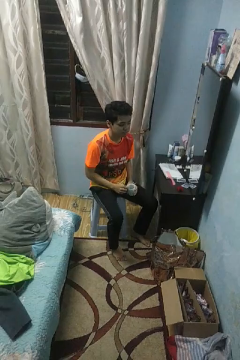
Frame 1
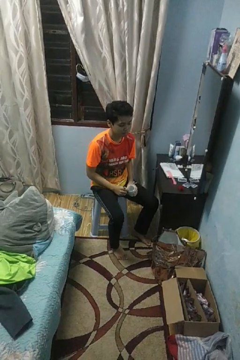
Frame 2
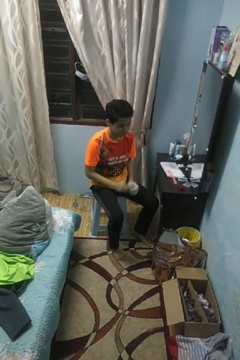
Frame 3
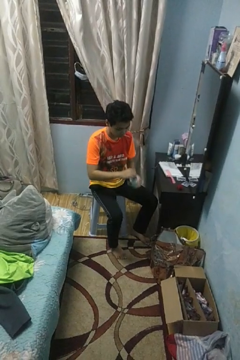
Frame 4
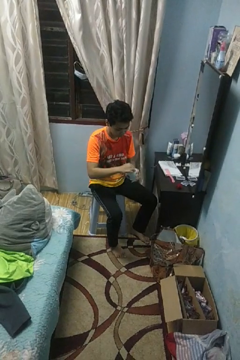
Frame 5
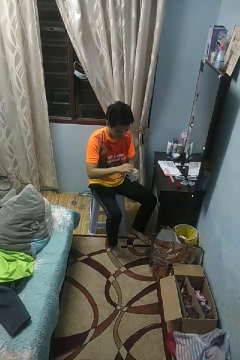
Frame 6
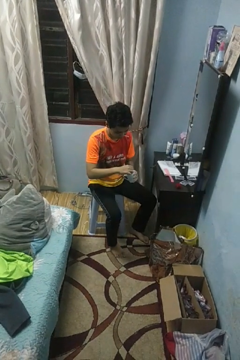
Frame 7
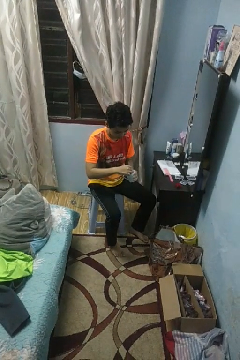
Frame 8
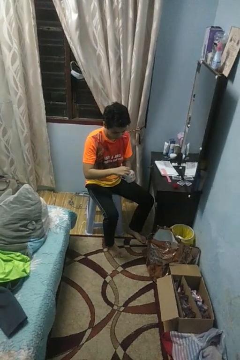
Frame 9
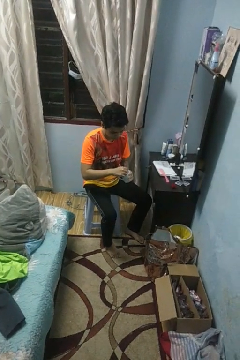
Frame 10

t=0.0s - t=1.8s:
person stirs mug

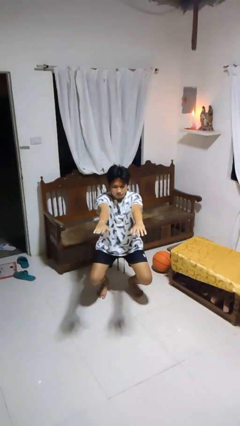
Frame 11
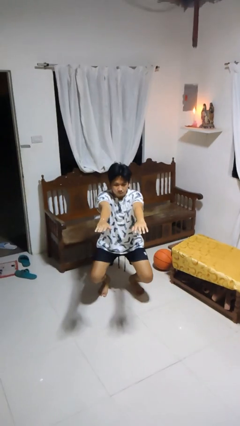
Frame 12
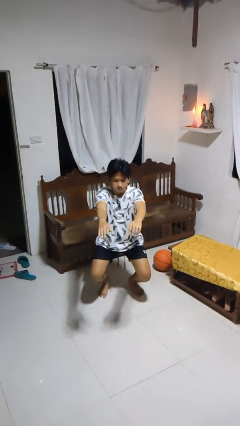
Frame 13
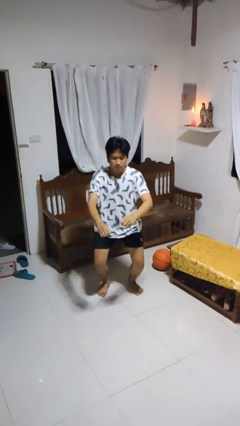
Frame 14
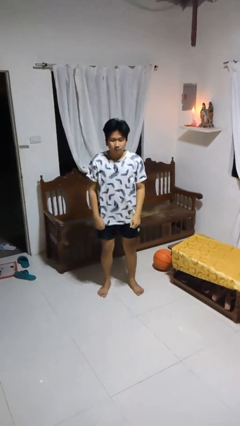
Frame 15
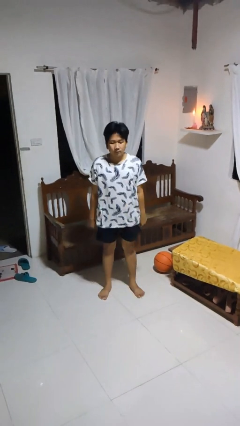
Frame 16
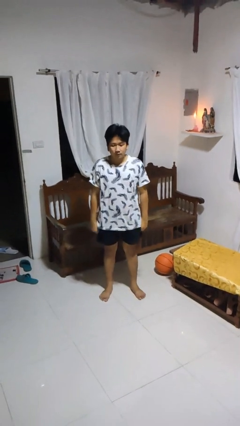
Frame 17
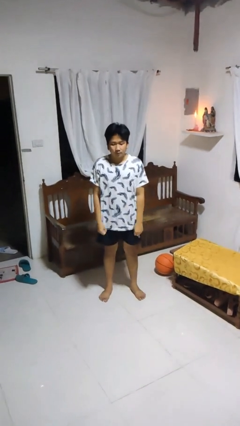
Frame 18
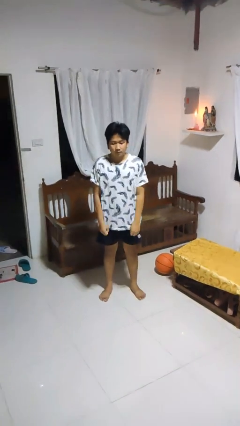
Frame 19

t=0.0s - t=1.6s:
person stands up

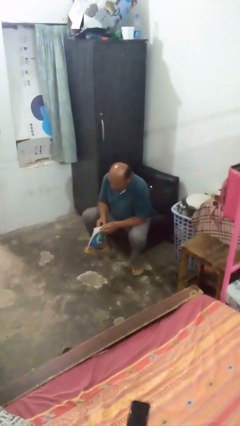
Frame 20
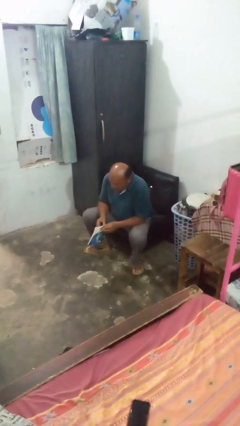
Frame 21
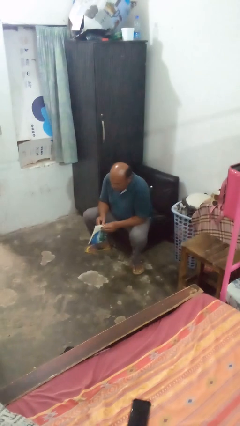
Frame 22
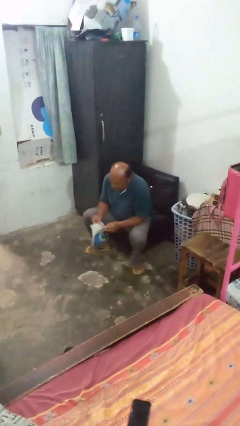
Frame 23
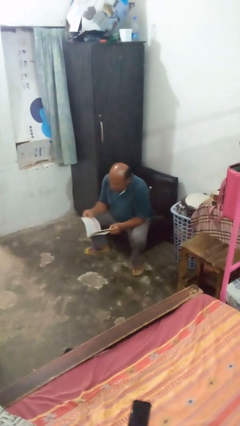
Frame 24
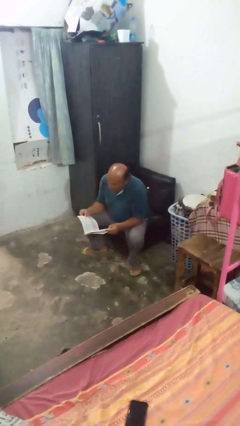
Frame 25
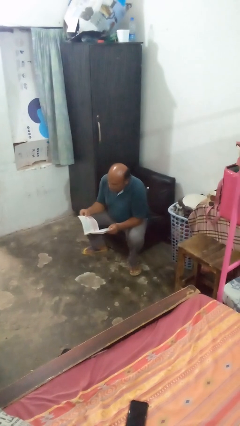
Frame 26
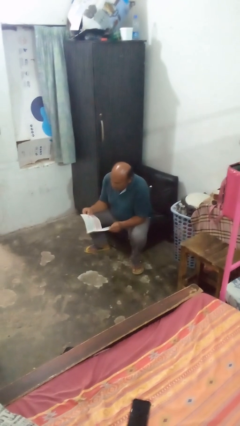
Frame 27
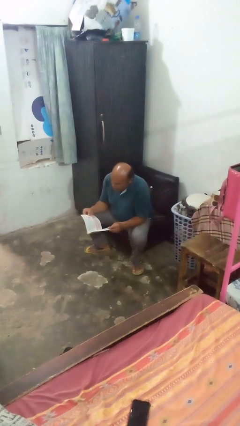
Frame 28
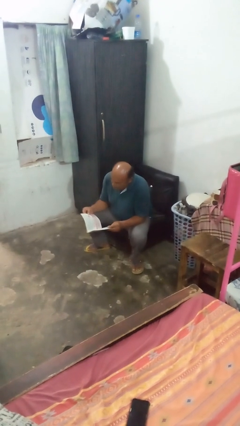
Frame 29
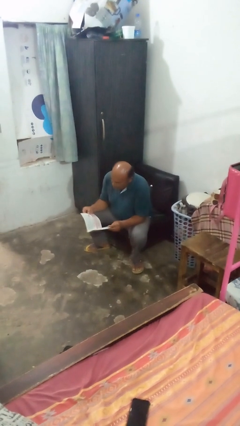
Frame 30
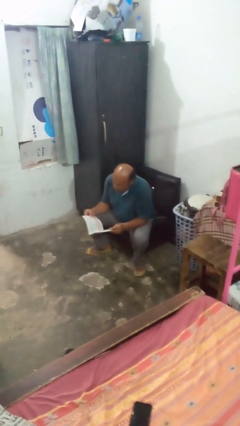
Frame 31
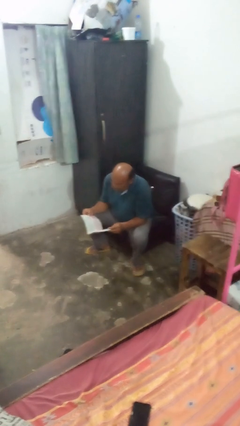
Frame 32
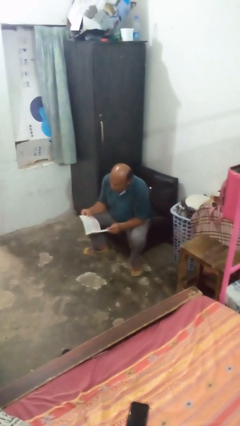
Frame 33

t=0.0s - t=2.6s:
person reads book

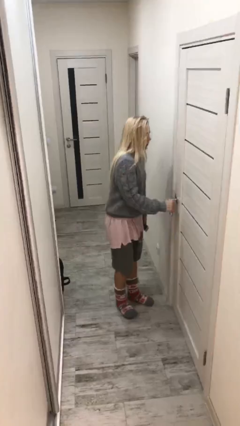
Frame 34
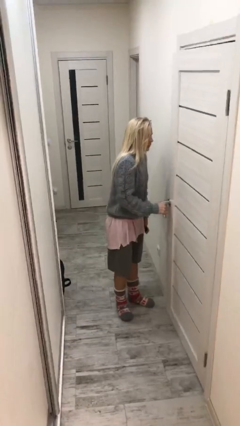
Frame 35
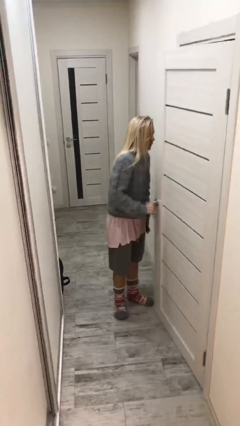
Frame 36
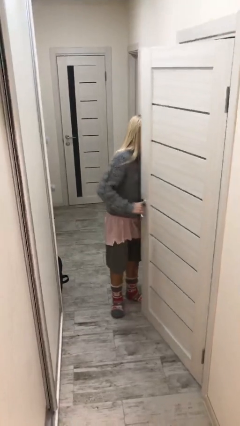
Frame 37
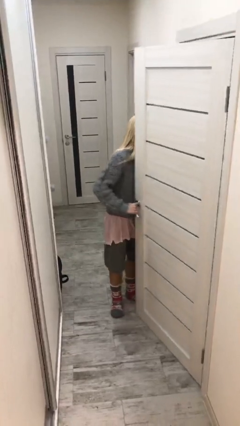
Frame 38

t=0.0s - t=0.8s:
person opens facility door

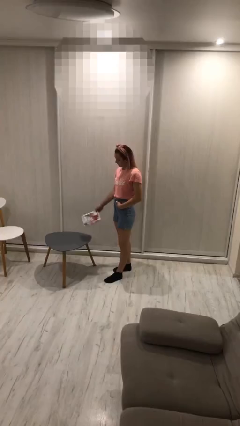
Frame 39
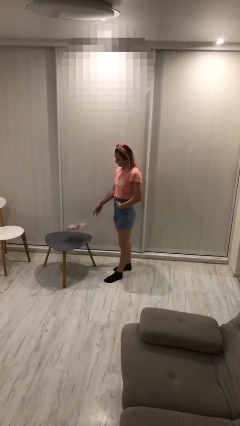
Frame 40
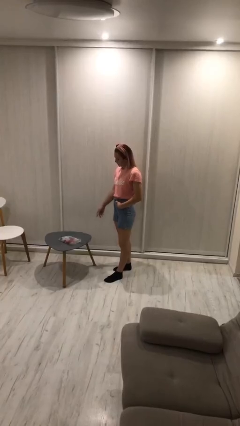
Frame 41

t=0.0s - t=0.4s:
person throws object on table

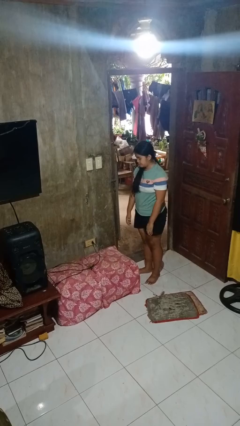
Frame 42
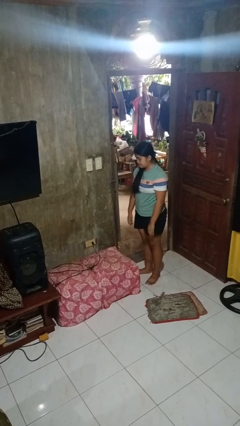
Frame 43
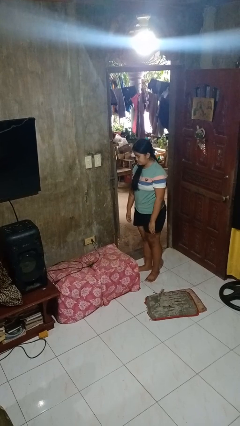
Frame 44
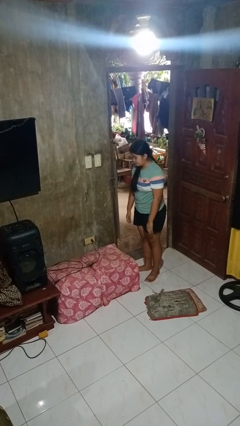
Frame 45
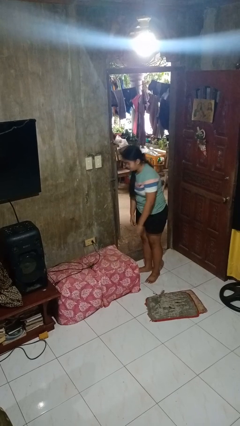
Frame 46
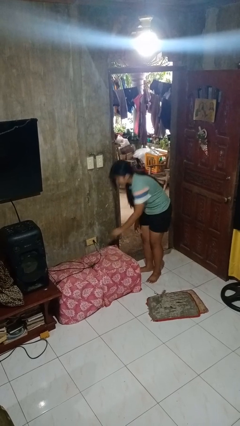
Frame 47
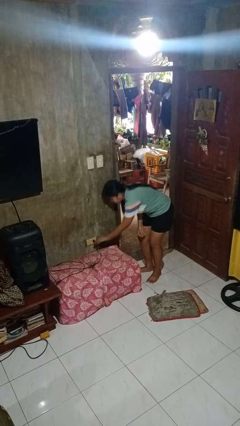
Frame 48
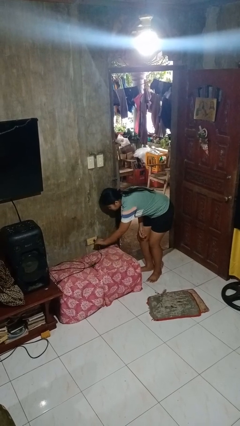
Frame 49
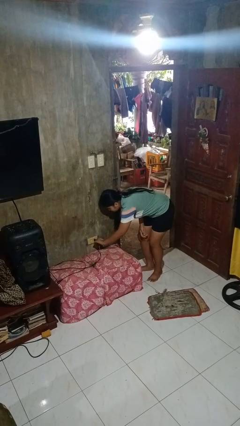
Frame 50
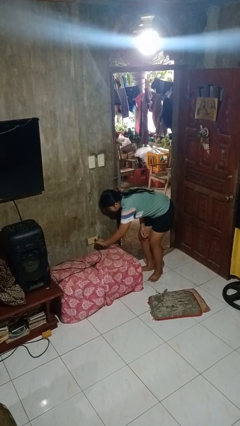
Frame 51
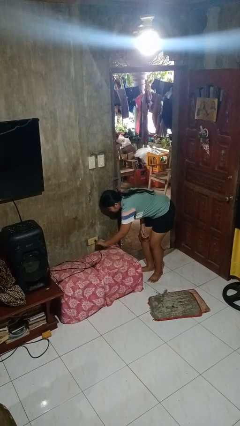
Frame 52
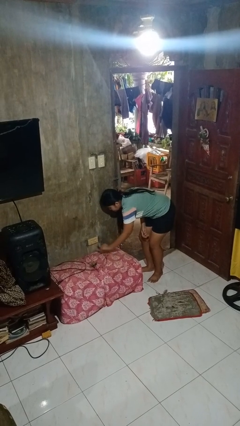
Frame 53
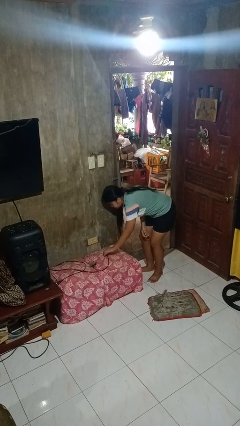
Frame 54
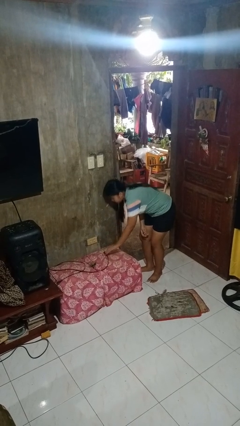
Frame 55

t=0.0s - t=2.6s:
person unplugs from electrical socket

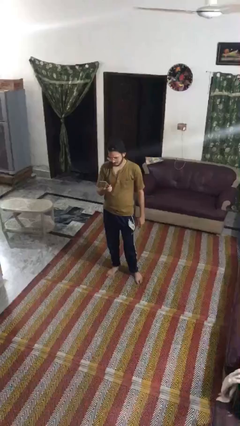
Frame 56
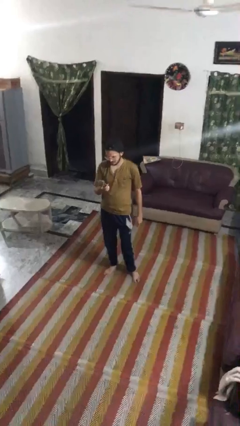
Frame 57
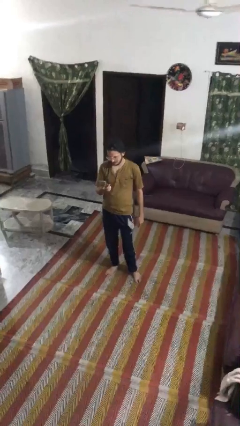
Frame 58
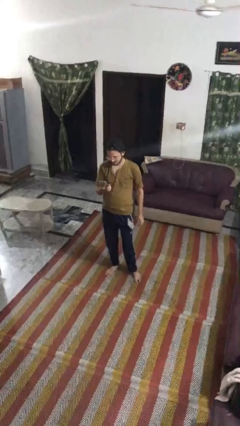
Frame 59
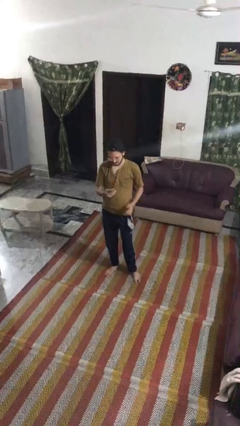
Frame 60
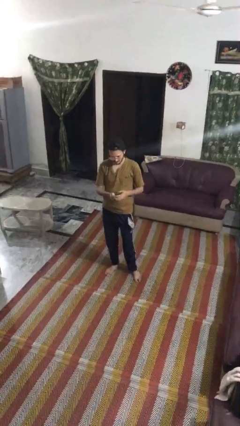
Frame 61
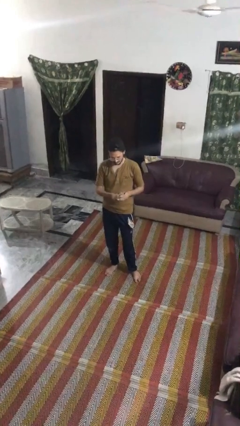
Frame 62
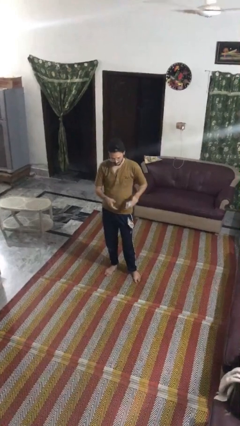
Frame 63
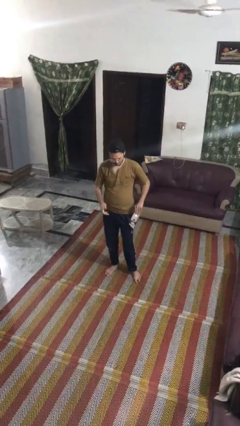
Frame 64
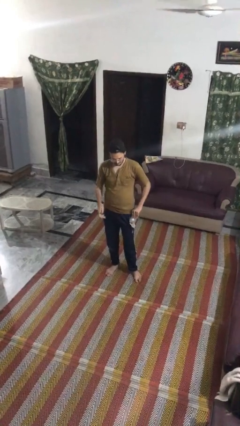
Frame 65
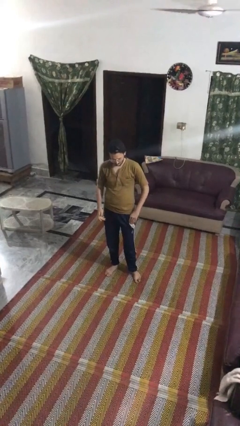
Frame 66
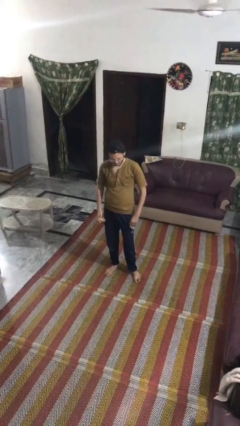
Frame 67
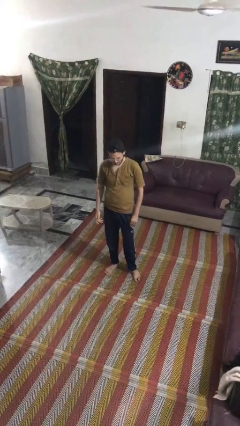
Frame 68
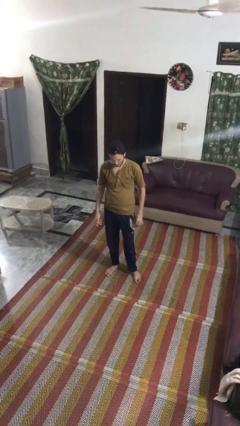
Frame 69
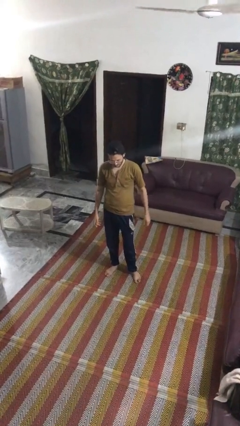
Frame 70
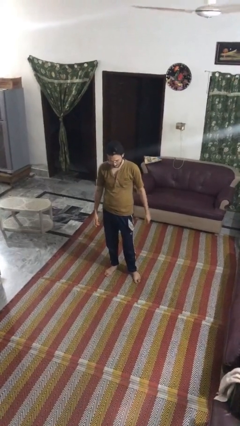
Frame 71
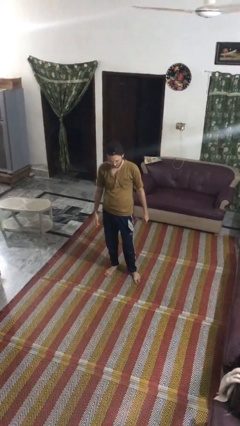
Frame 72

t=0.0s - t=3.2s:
person puts phone into pocket

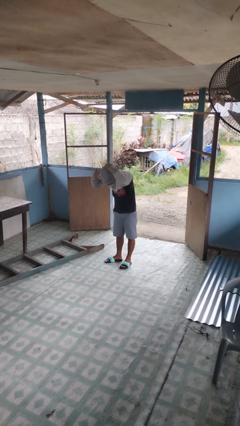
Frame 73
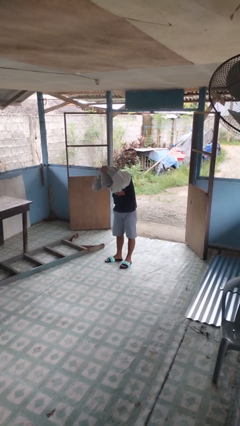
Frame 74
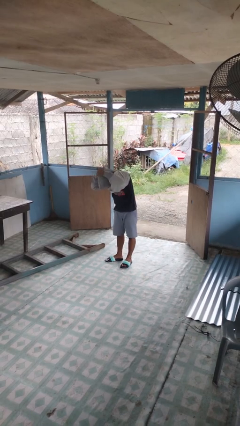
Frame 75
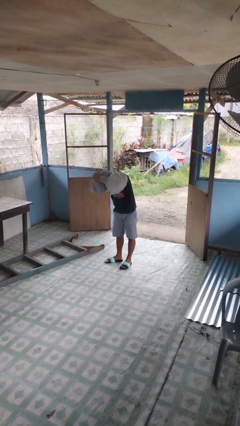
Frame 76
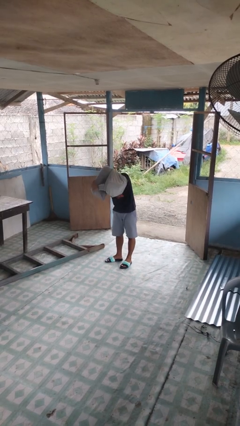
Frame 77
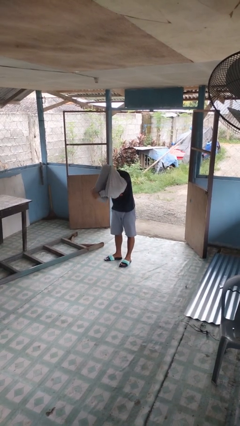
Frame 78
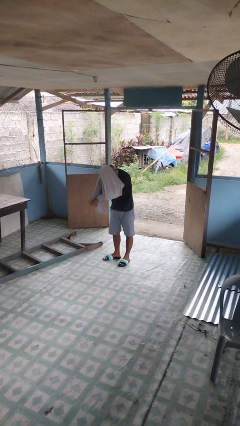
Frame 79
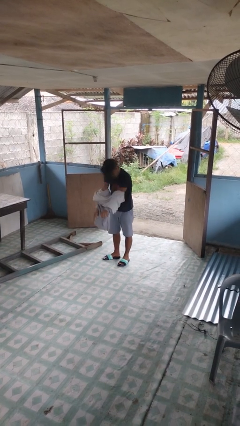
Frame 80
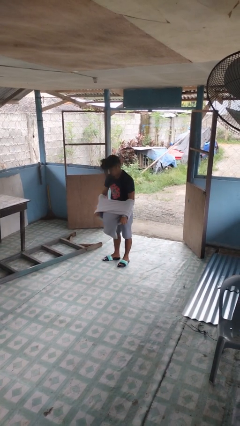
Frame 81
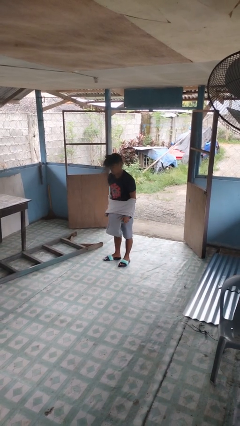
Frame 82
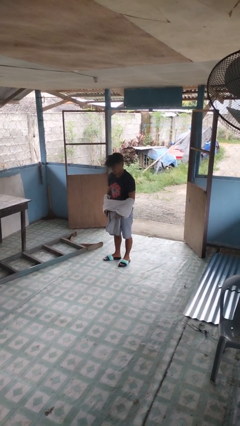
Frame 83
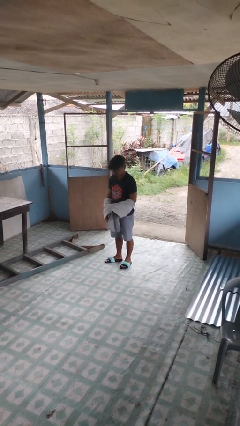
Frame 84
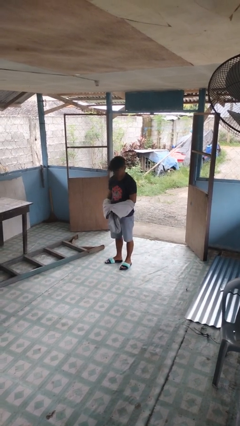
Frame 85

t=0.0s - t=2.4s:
person takes off hoodie

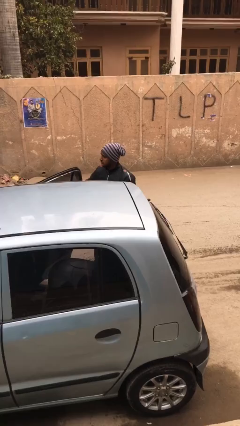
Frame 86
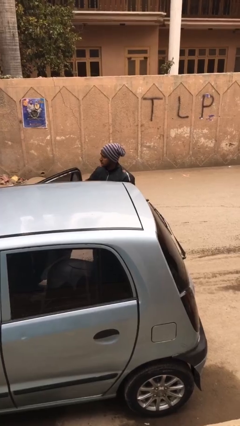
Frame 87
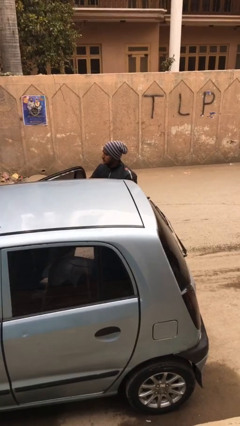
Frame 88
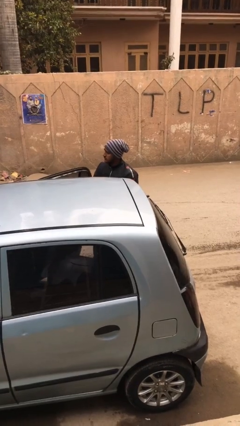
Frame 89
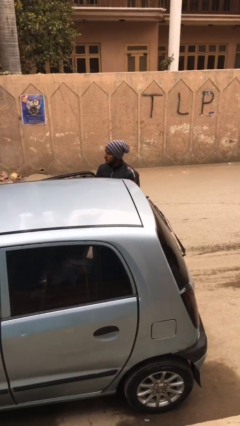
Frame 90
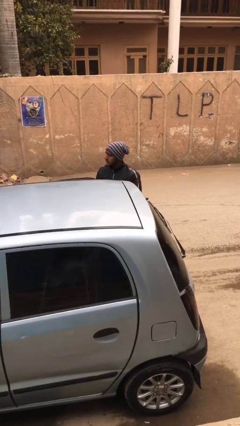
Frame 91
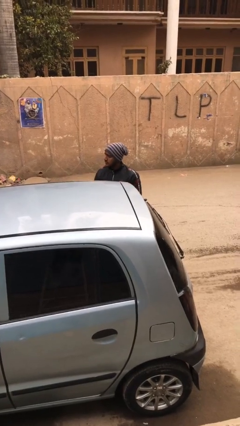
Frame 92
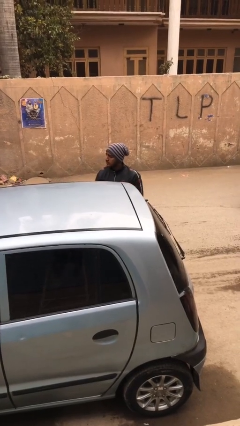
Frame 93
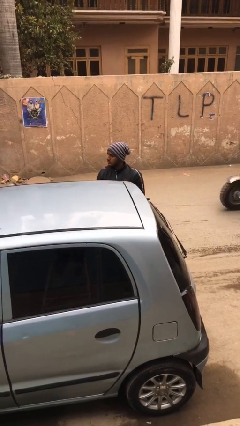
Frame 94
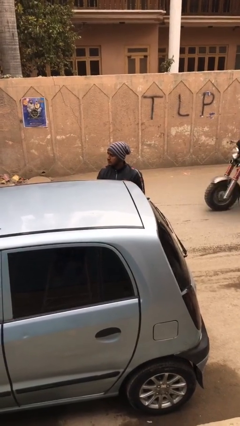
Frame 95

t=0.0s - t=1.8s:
person closes car door
